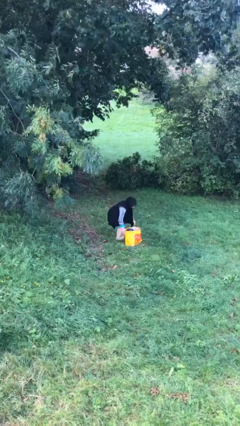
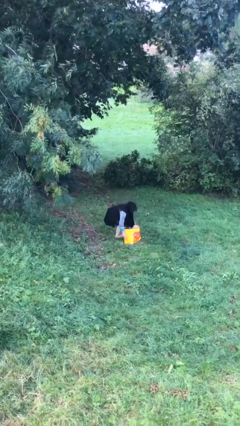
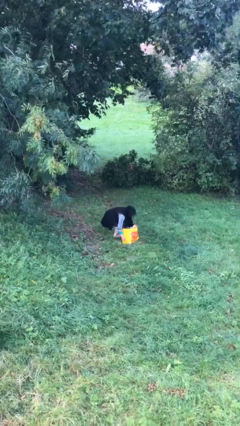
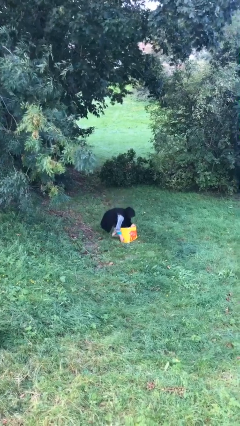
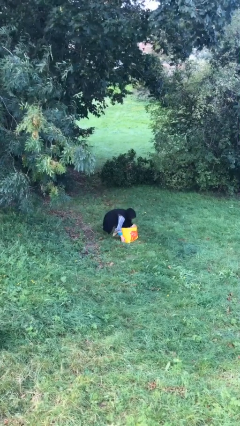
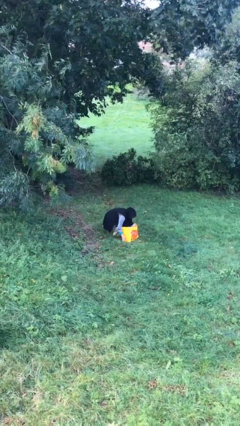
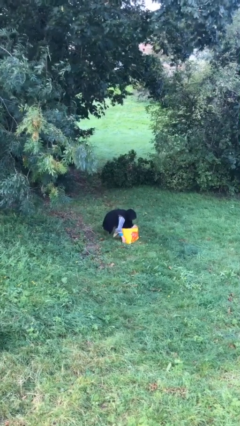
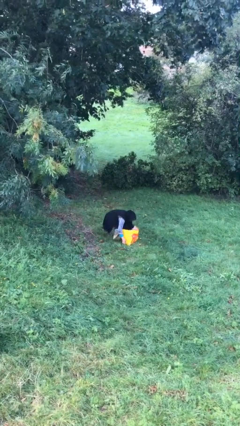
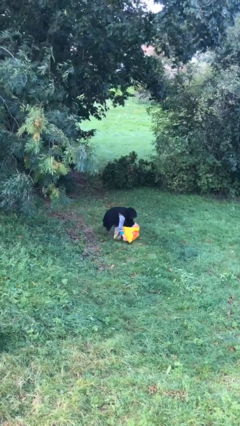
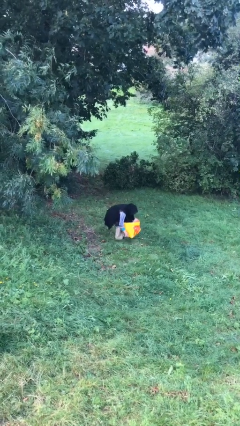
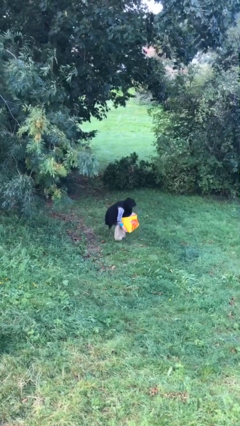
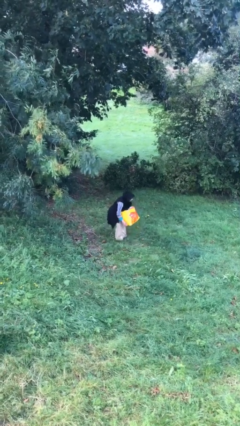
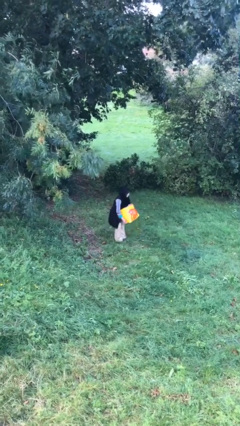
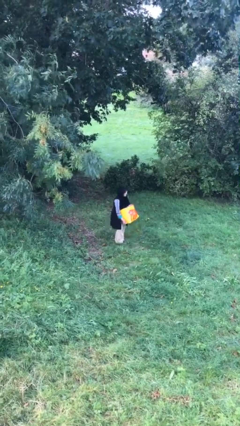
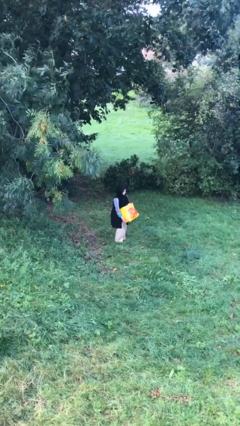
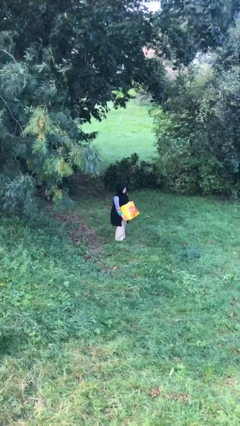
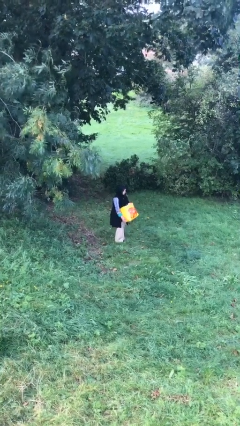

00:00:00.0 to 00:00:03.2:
person picks up object from floor

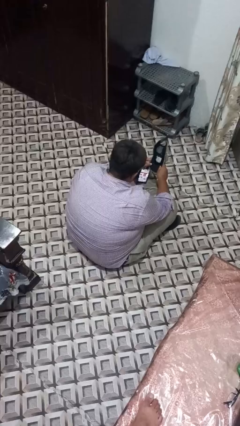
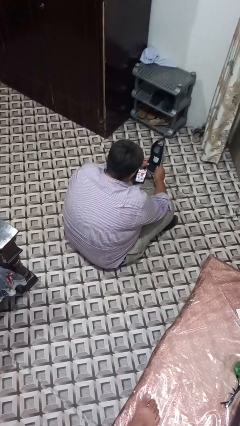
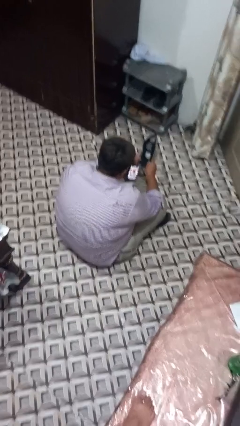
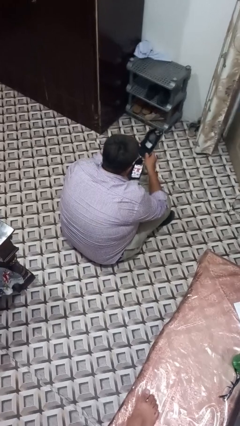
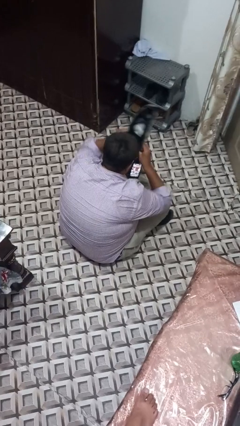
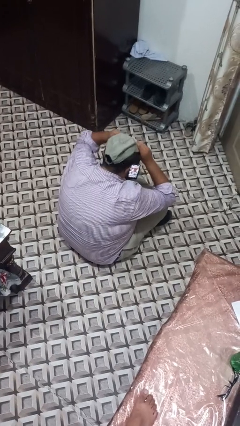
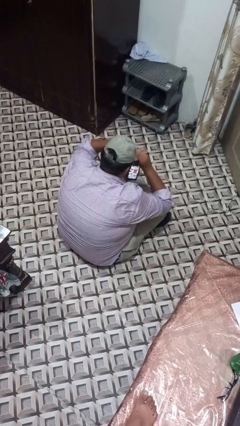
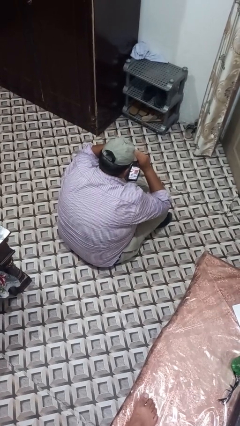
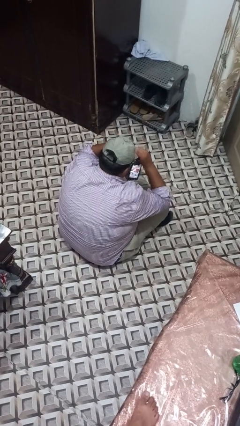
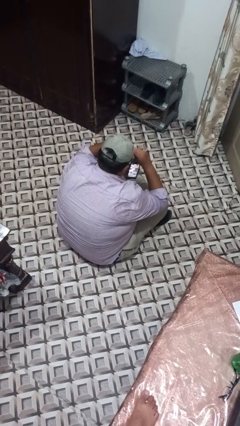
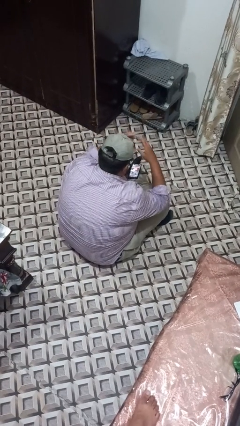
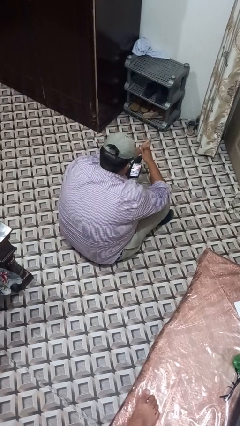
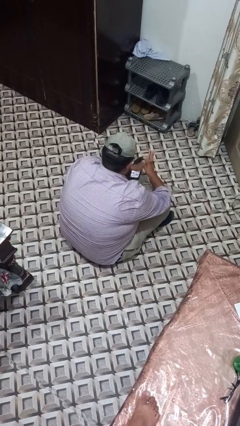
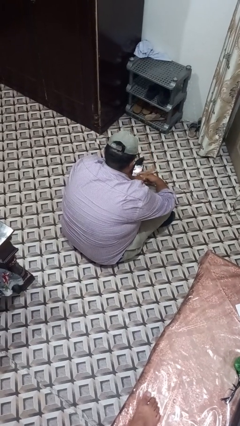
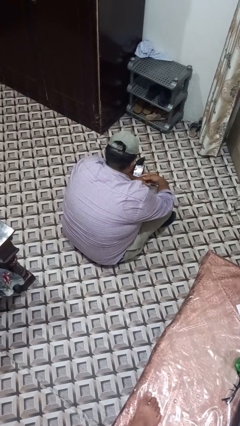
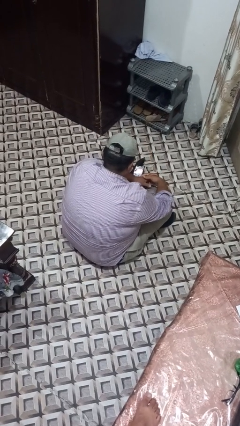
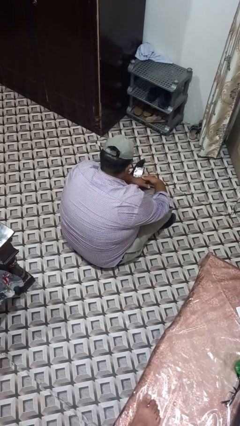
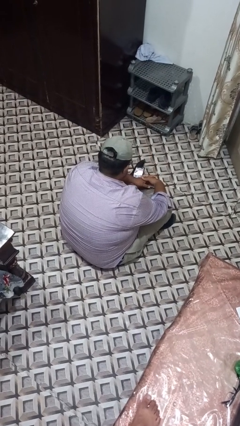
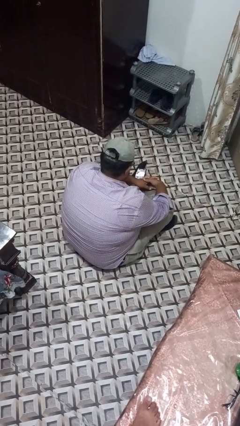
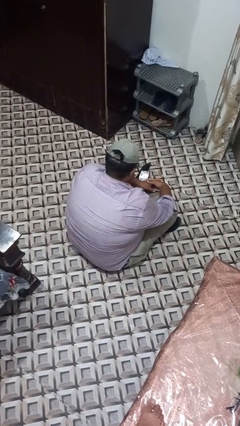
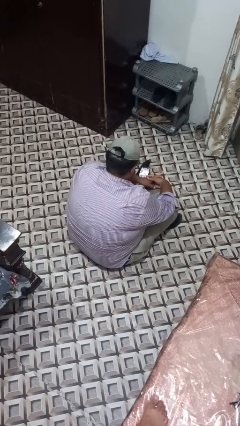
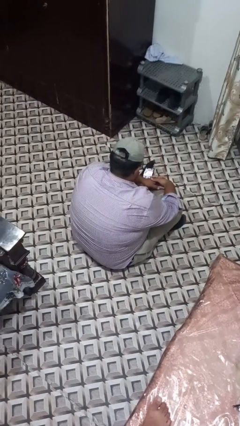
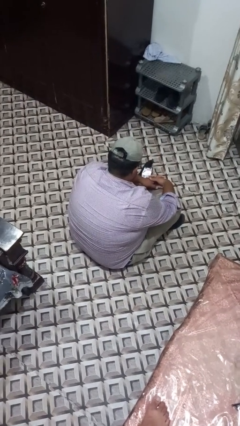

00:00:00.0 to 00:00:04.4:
person puts on hat

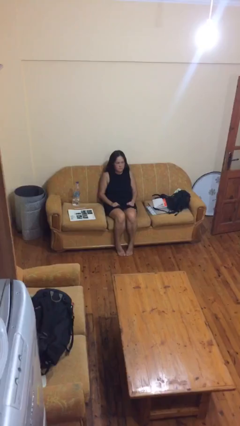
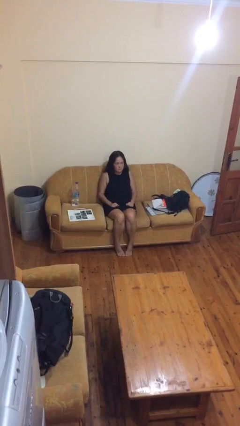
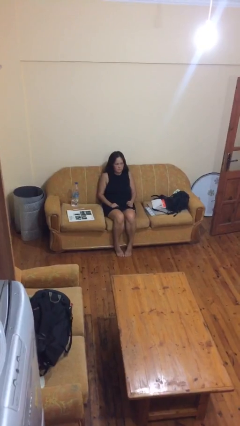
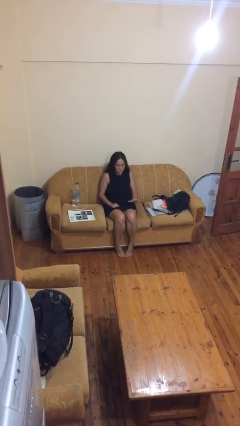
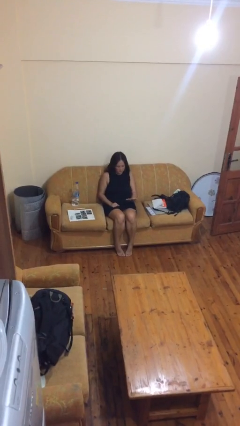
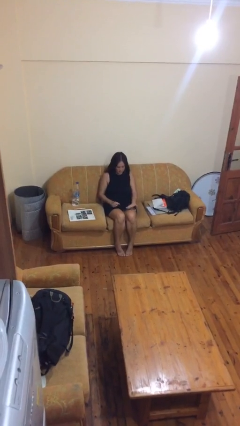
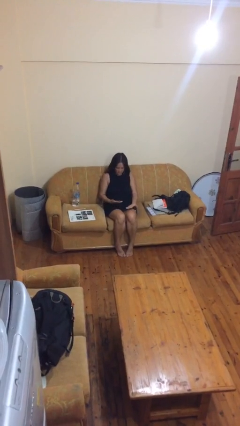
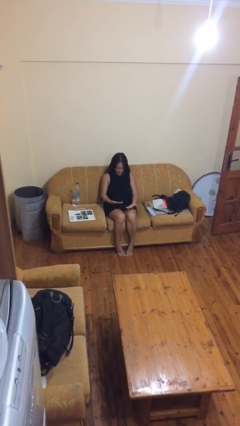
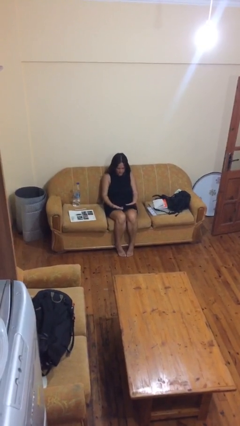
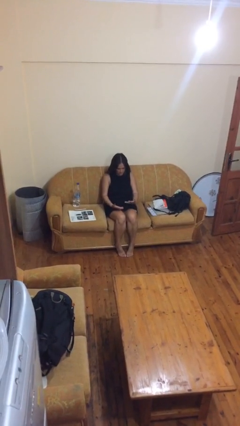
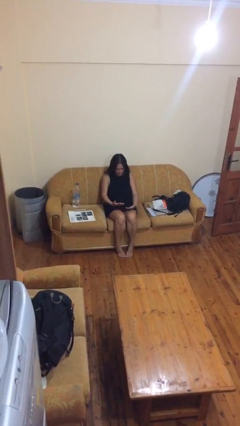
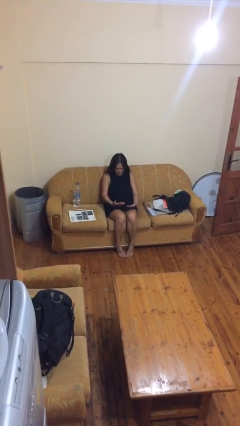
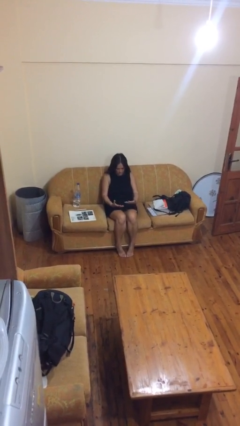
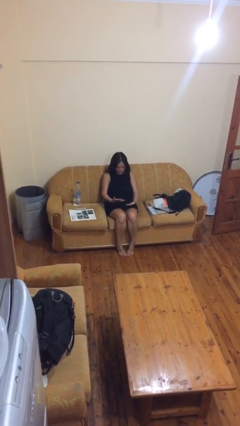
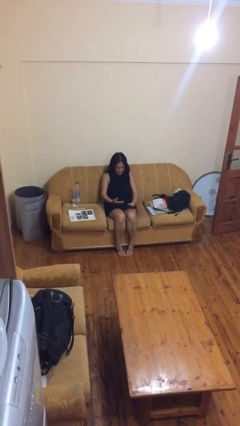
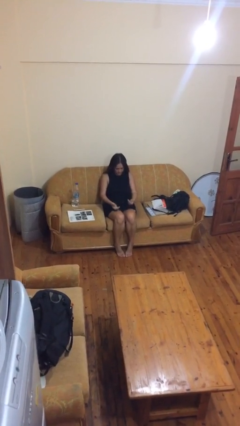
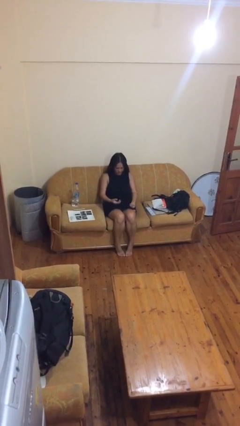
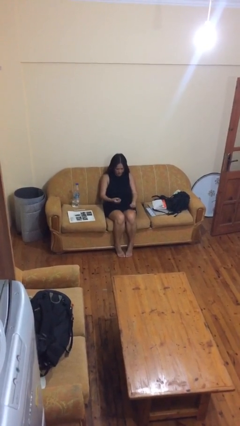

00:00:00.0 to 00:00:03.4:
person looks at hands in lap

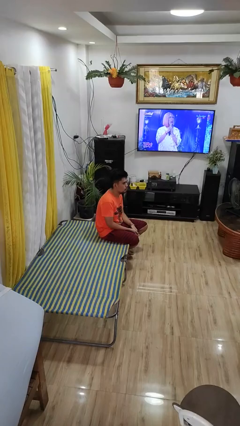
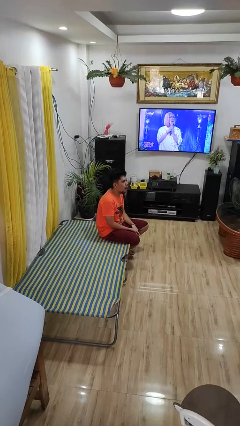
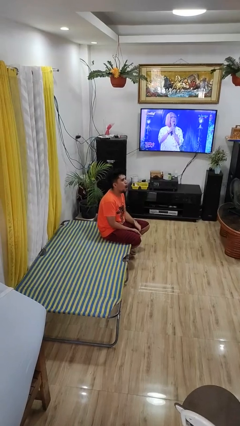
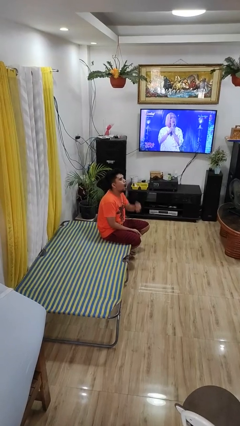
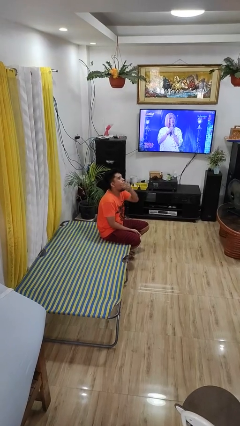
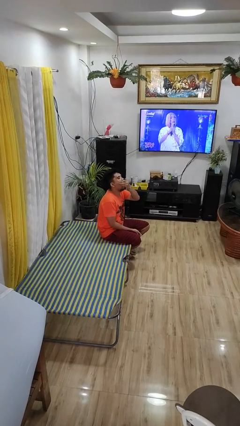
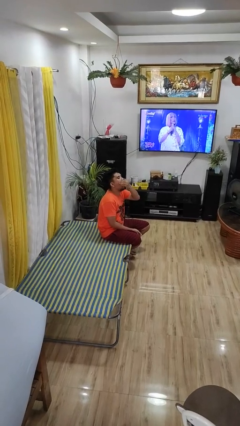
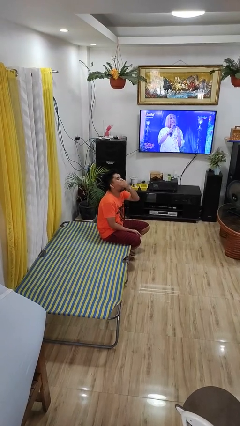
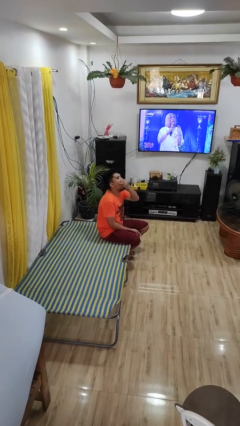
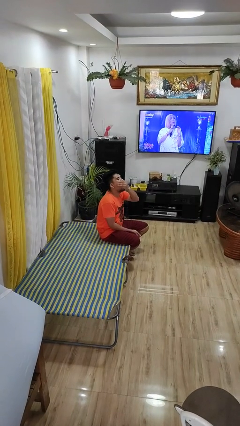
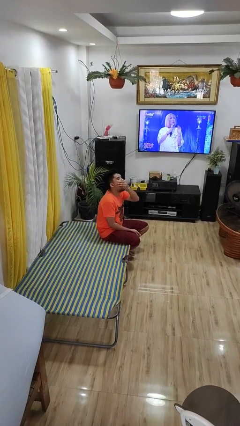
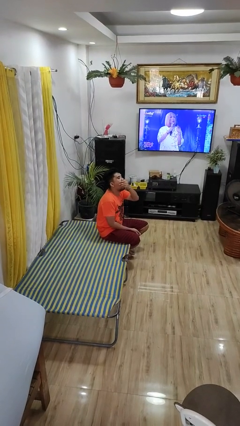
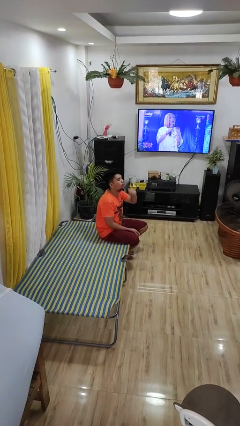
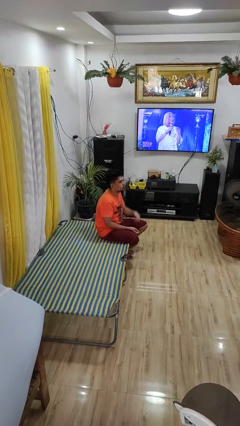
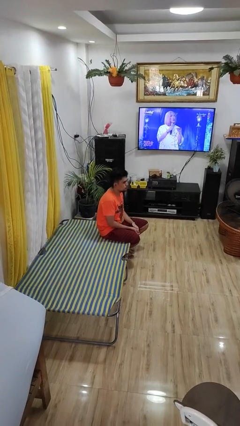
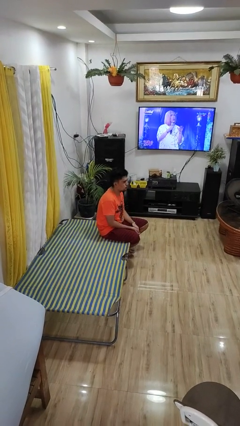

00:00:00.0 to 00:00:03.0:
person yawns

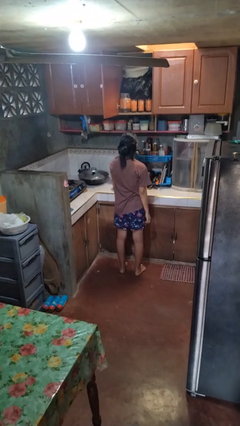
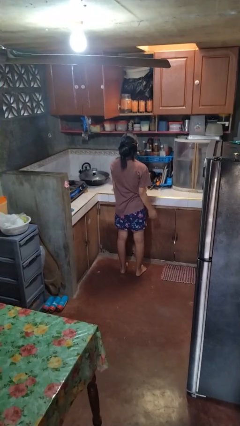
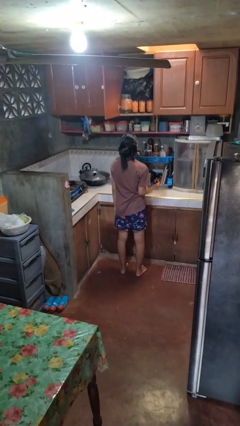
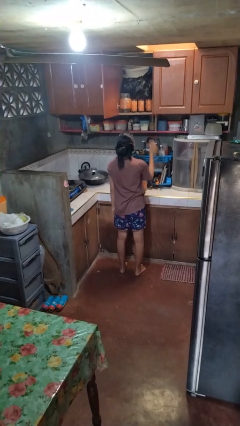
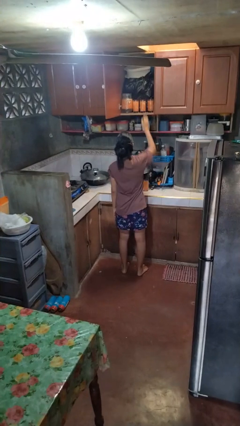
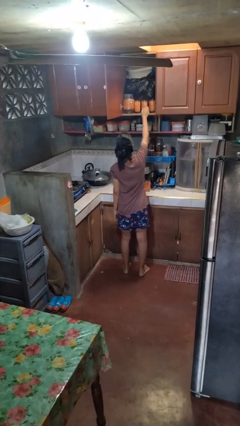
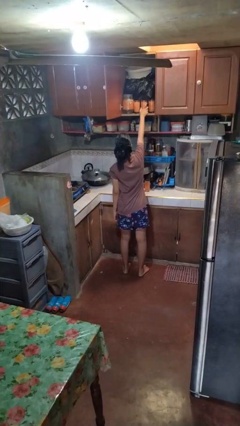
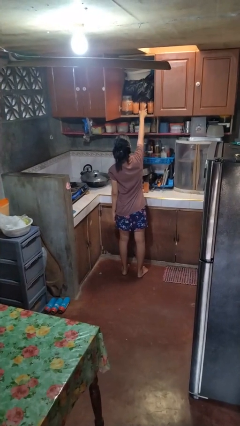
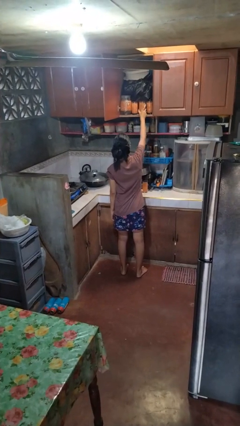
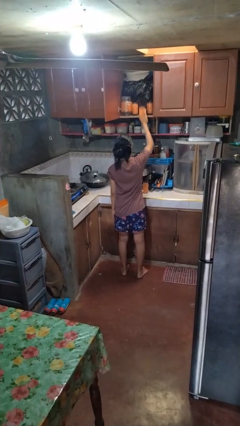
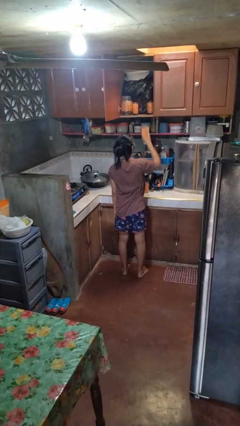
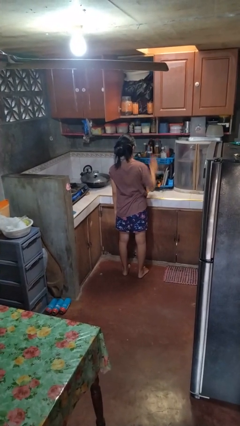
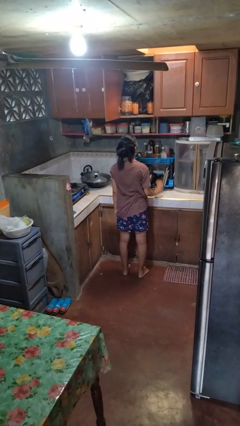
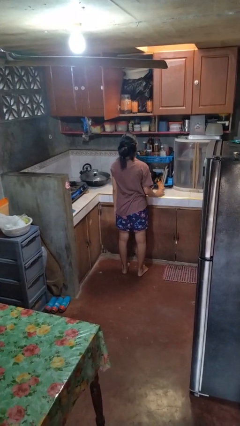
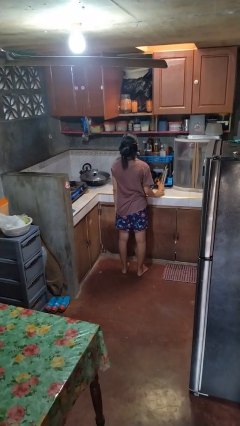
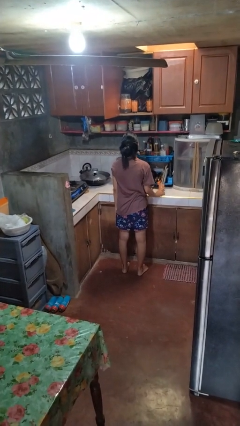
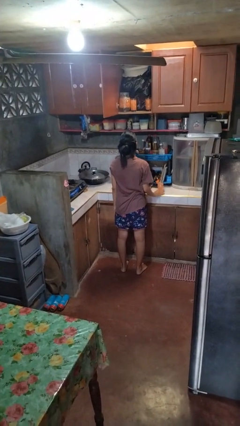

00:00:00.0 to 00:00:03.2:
person takes object from cabinet

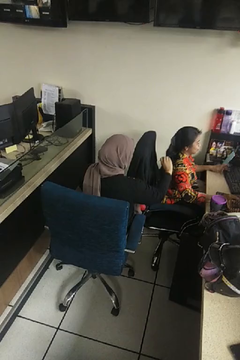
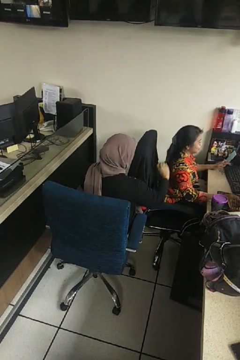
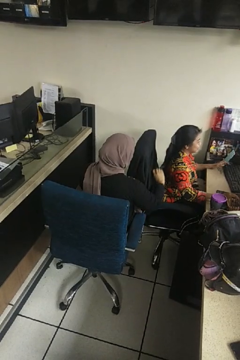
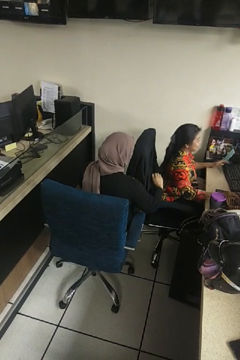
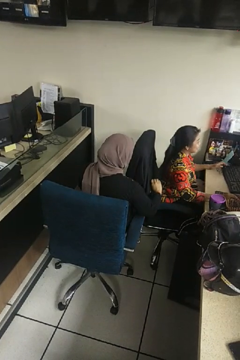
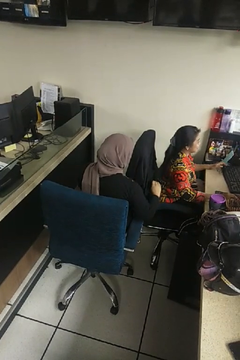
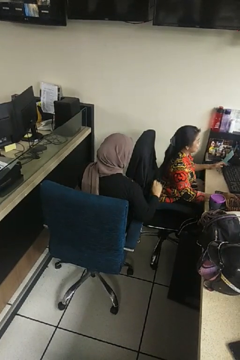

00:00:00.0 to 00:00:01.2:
person brushes hair of person
